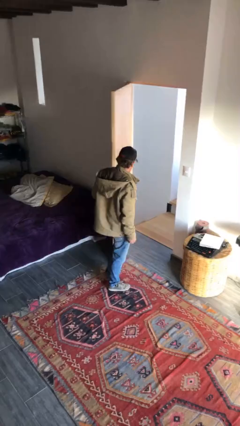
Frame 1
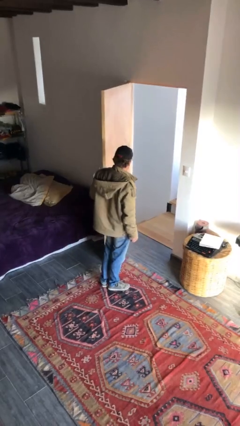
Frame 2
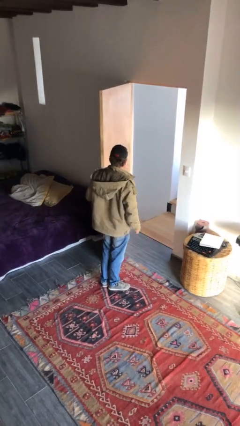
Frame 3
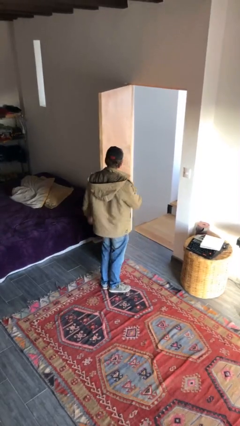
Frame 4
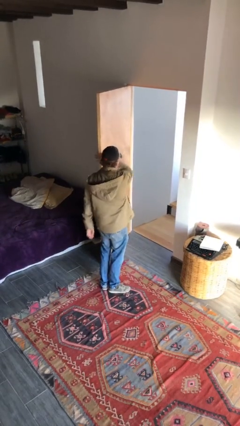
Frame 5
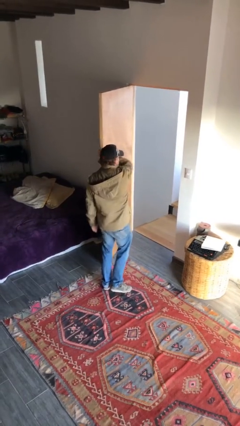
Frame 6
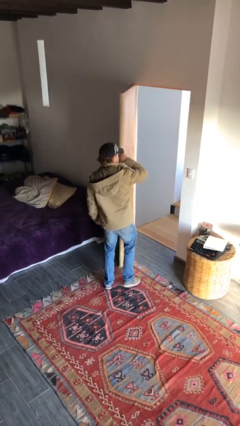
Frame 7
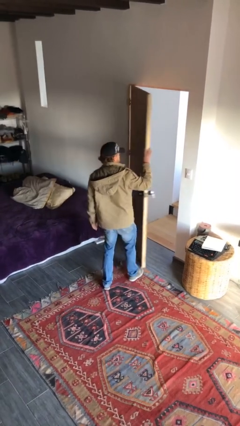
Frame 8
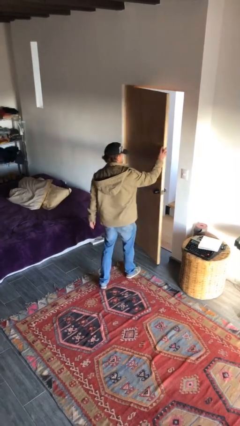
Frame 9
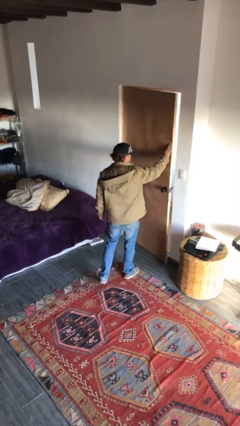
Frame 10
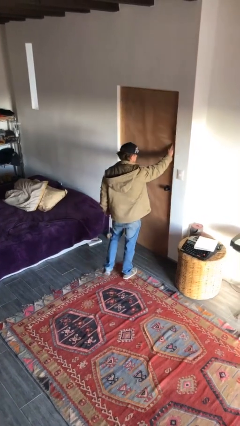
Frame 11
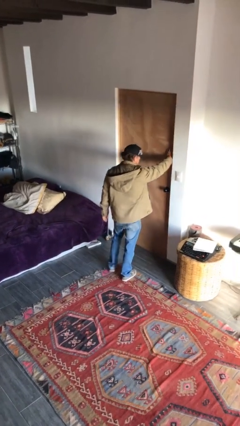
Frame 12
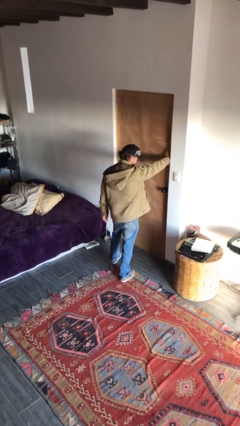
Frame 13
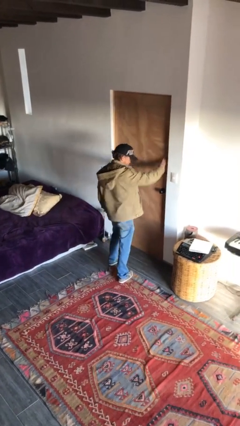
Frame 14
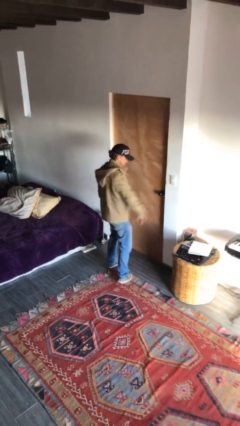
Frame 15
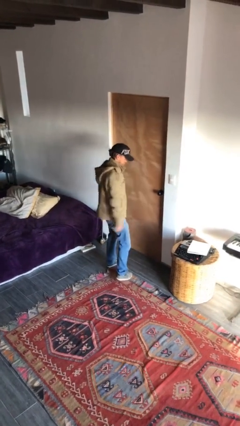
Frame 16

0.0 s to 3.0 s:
person closes facility door

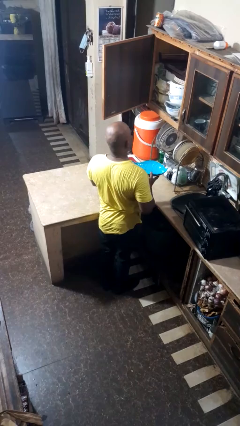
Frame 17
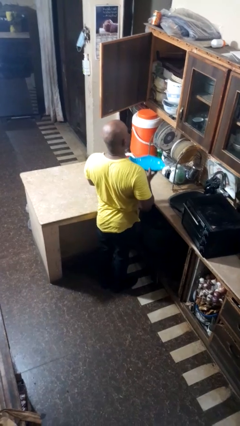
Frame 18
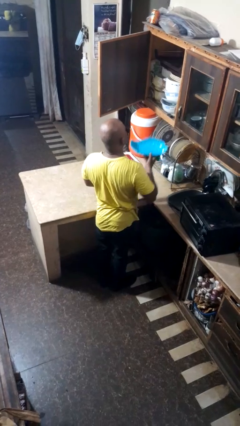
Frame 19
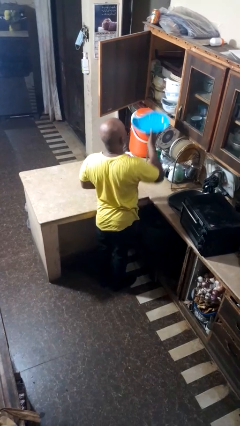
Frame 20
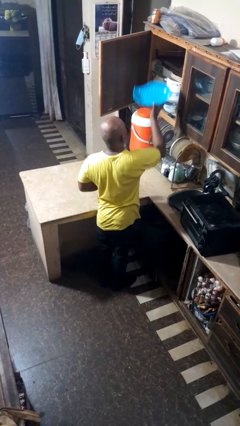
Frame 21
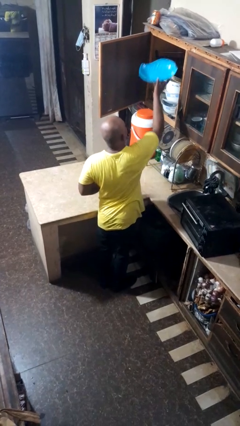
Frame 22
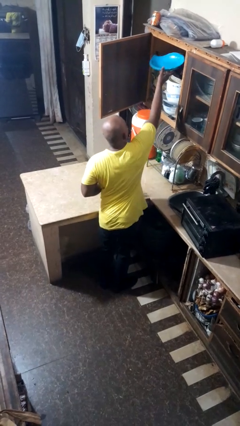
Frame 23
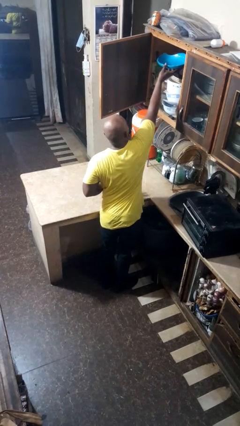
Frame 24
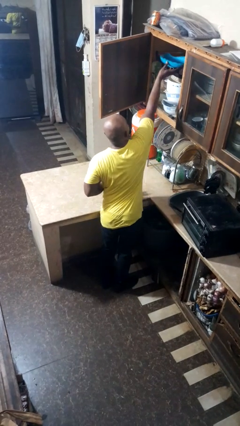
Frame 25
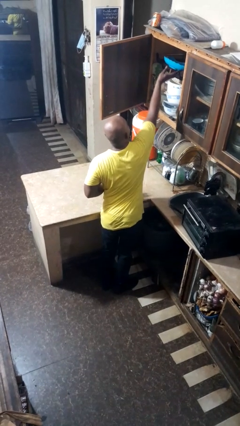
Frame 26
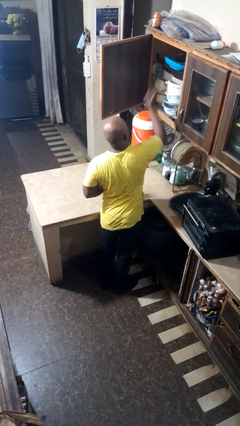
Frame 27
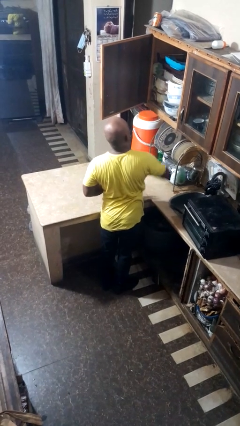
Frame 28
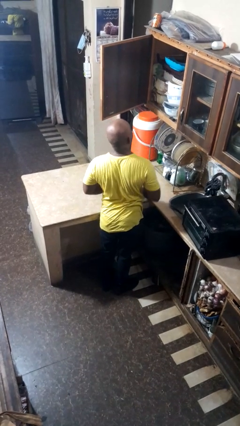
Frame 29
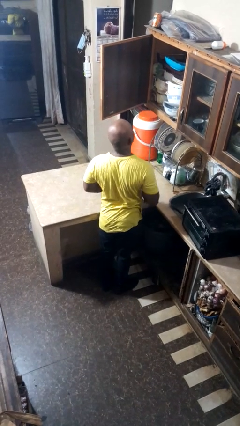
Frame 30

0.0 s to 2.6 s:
person puts object in cabinet

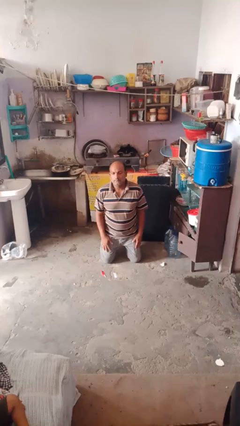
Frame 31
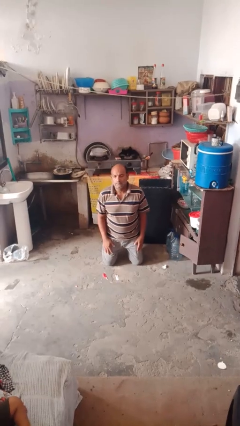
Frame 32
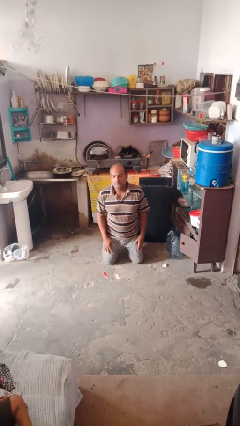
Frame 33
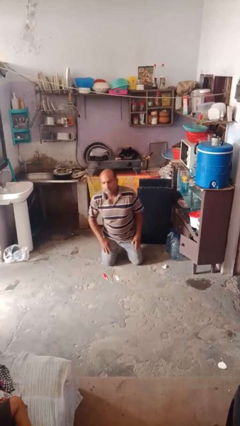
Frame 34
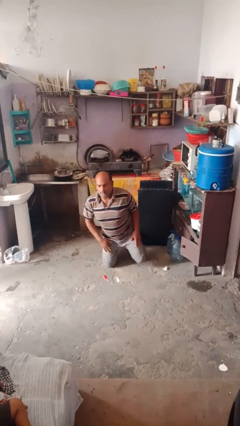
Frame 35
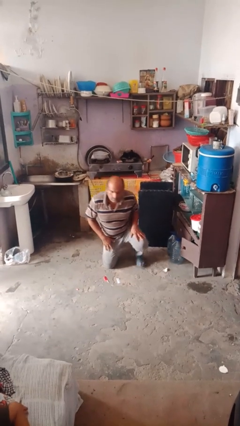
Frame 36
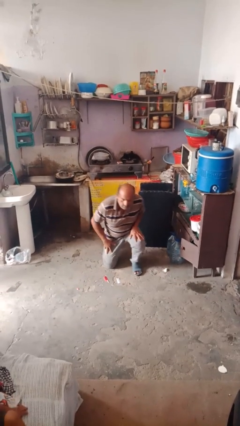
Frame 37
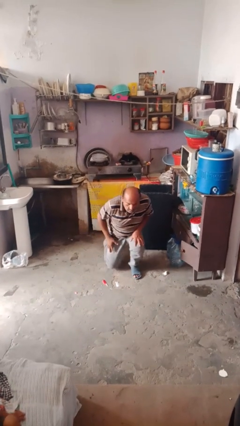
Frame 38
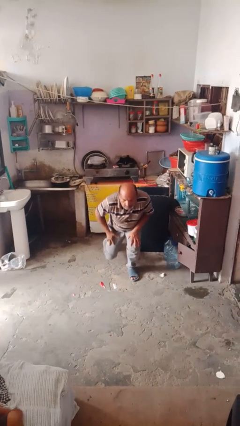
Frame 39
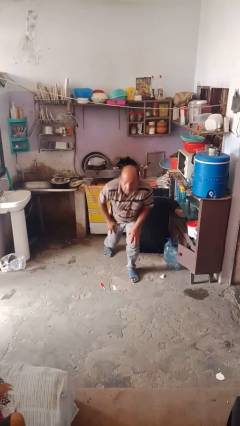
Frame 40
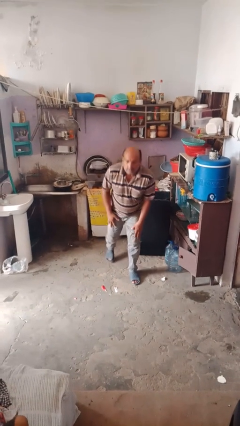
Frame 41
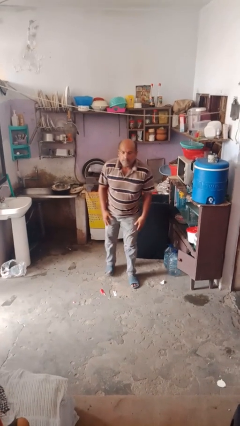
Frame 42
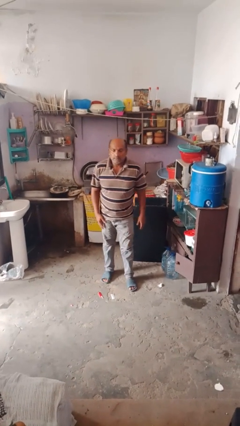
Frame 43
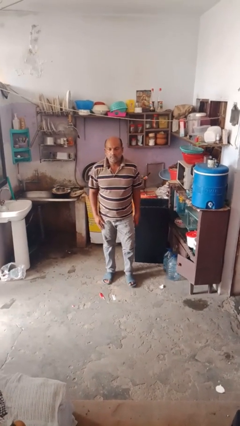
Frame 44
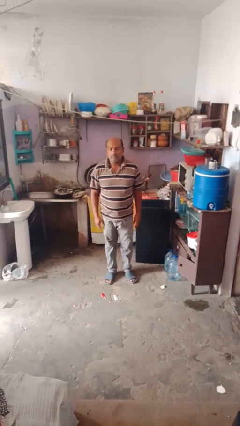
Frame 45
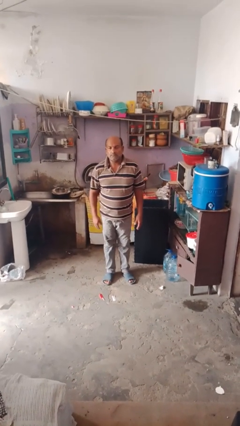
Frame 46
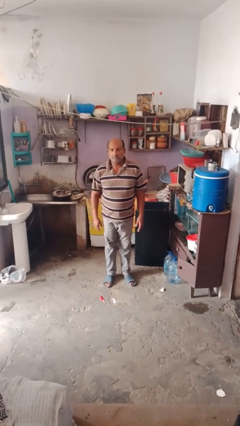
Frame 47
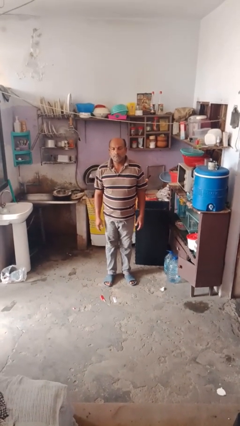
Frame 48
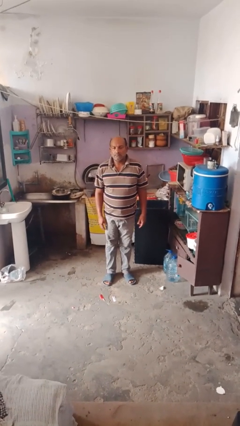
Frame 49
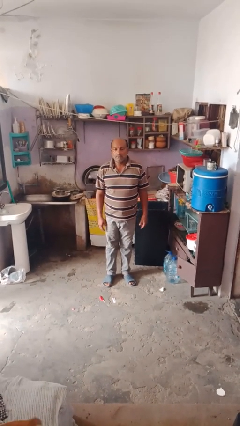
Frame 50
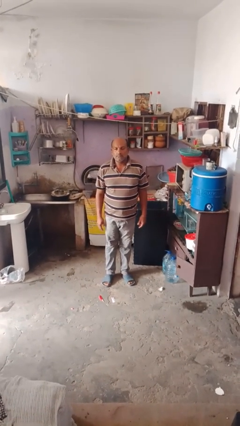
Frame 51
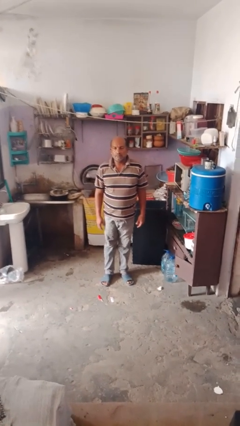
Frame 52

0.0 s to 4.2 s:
person stands up from floor

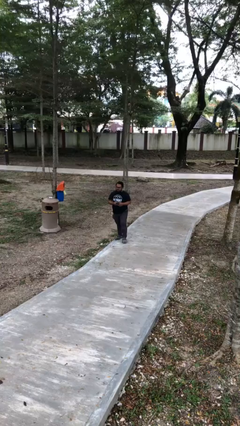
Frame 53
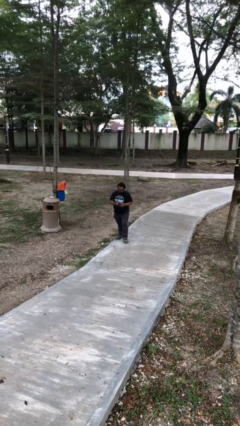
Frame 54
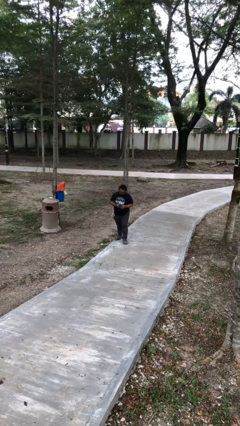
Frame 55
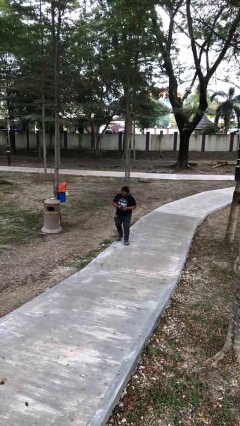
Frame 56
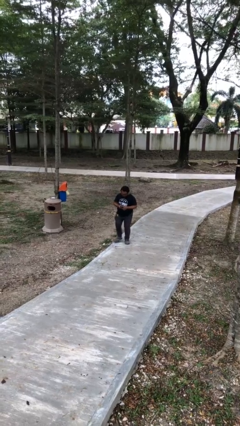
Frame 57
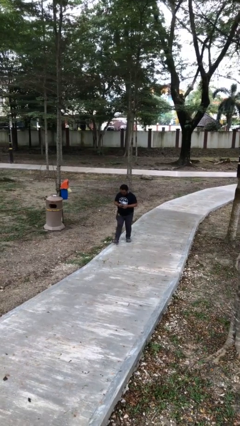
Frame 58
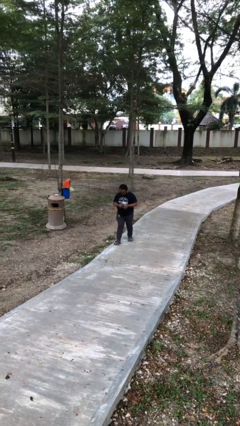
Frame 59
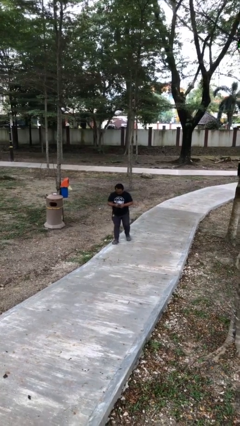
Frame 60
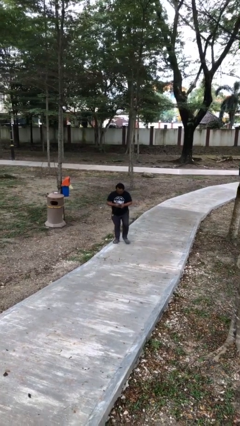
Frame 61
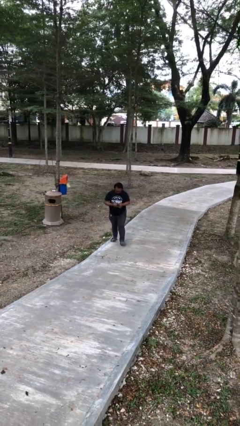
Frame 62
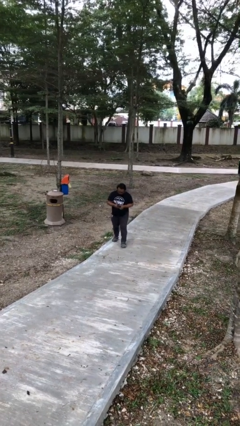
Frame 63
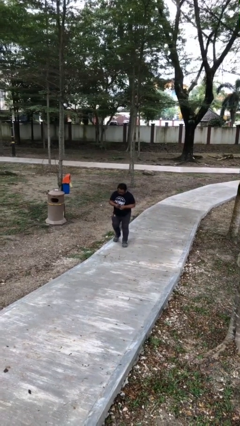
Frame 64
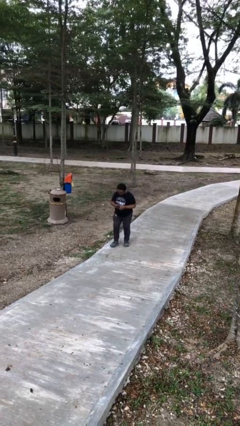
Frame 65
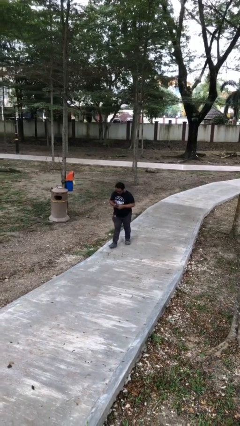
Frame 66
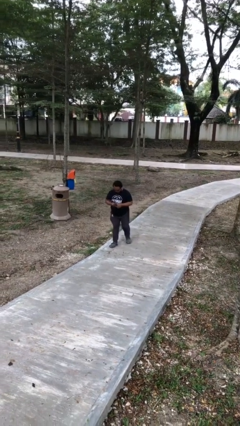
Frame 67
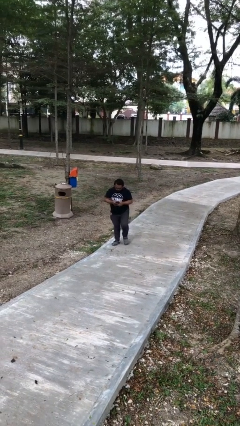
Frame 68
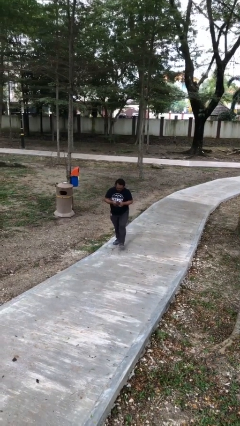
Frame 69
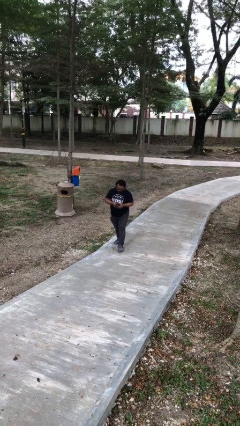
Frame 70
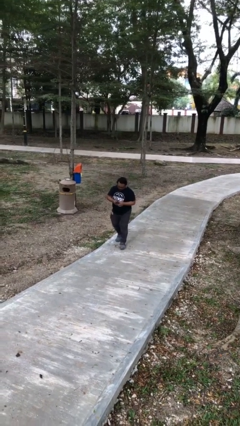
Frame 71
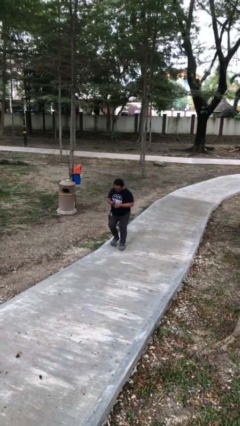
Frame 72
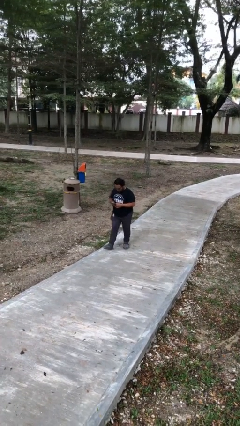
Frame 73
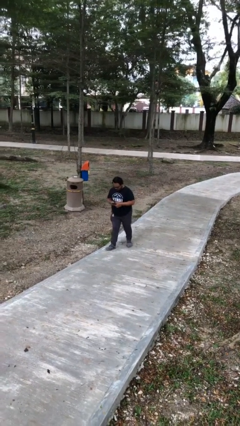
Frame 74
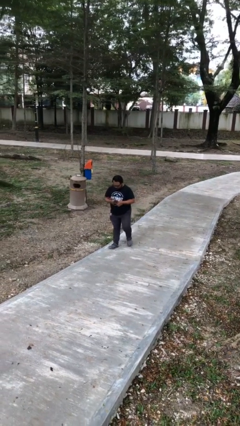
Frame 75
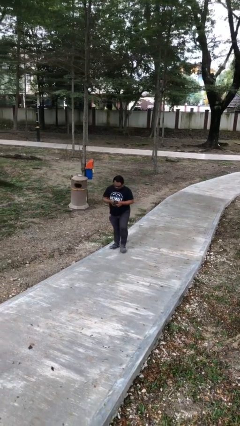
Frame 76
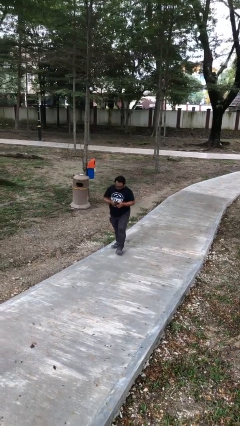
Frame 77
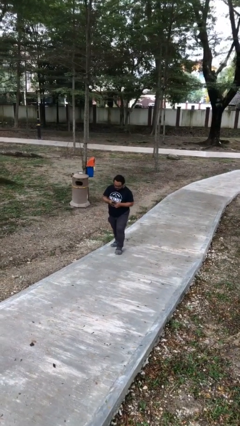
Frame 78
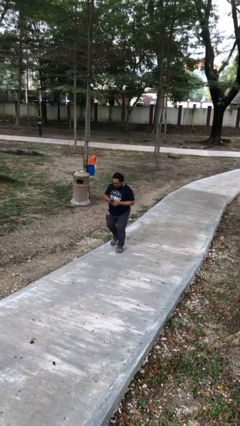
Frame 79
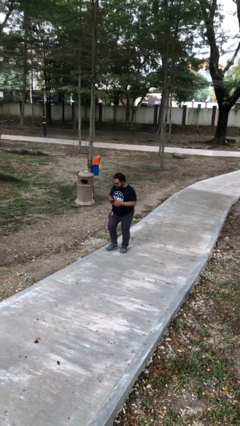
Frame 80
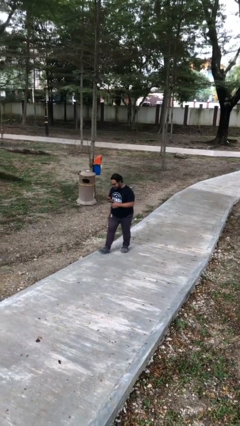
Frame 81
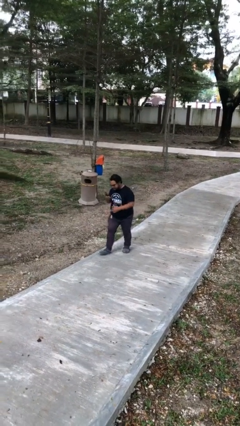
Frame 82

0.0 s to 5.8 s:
person texts on phone

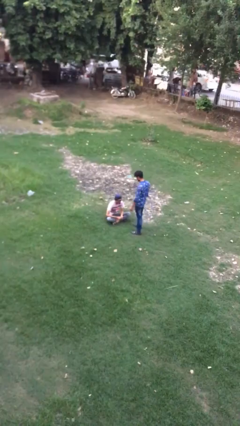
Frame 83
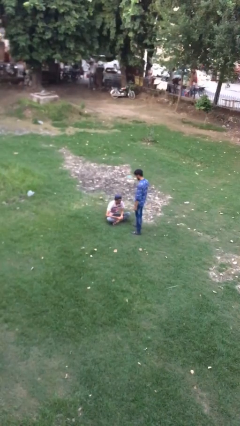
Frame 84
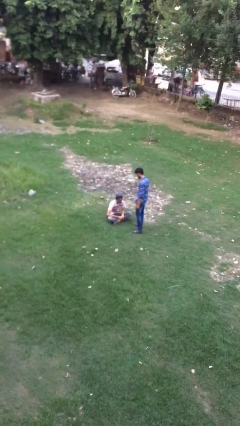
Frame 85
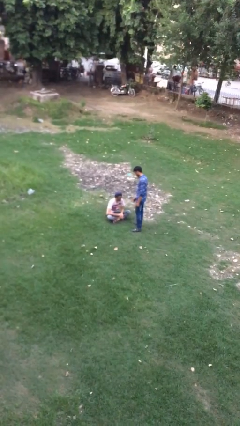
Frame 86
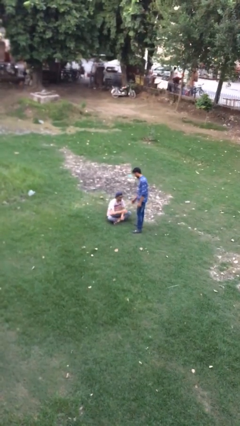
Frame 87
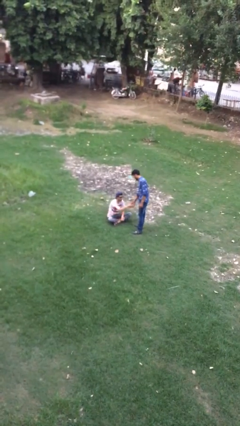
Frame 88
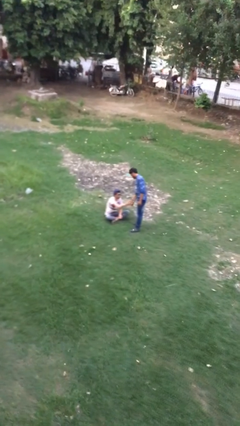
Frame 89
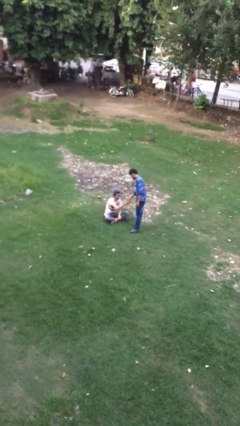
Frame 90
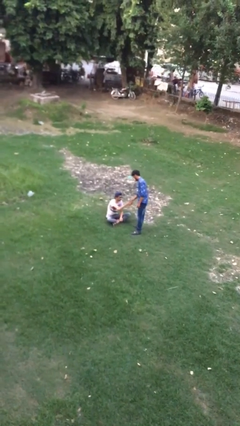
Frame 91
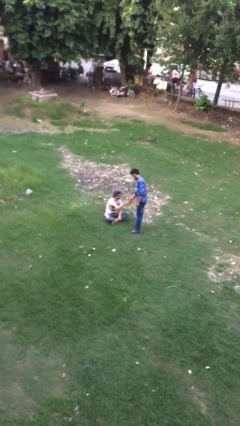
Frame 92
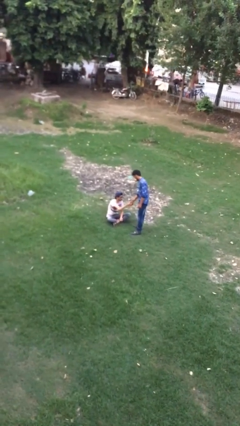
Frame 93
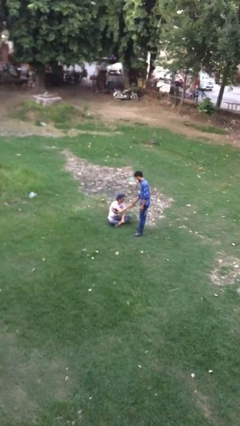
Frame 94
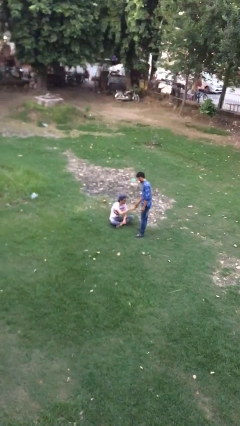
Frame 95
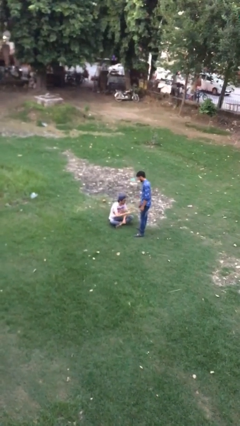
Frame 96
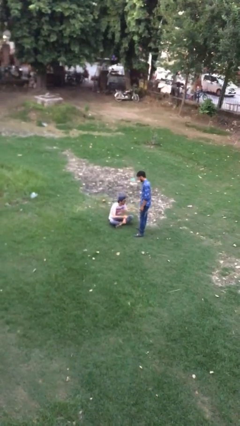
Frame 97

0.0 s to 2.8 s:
person shakes hand
